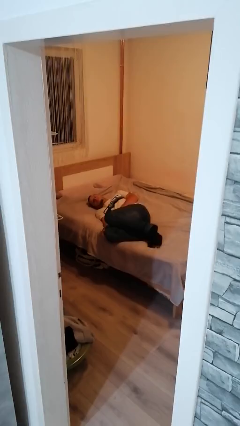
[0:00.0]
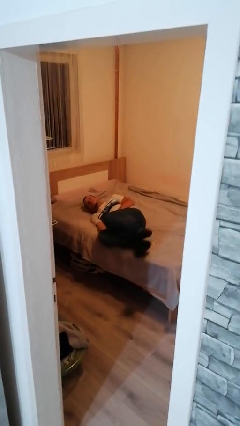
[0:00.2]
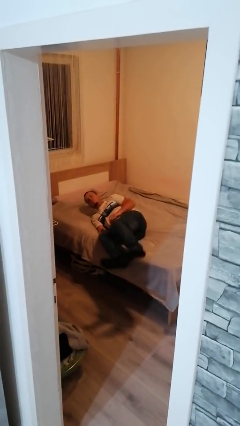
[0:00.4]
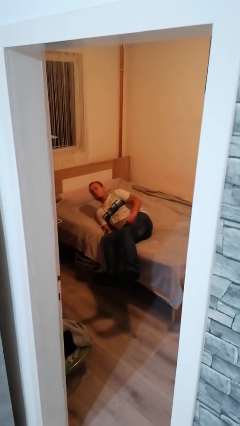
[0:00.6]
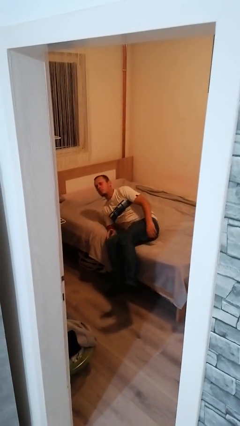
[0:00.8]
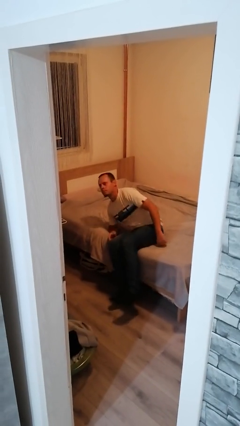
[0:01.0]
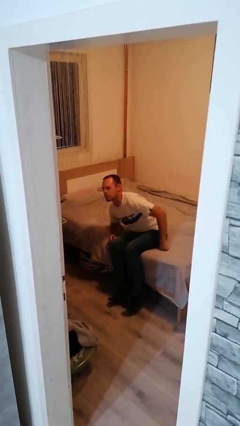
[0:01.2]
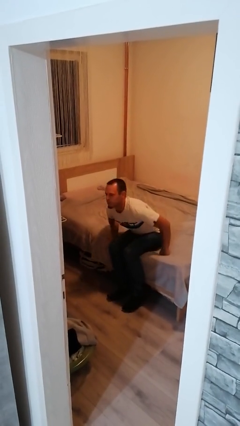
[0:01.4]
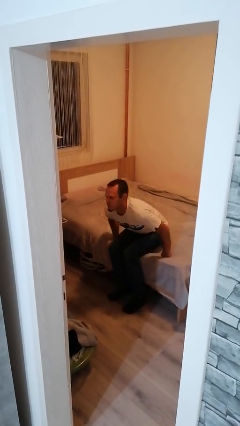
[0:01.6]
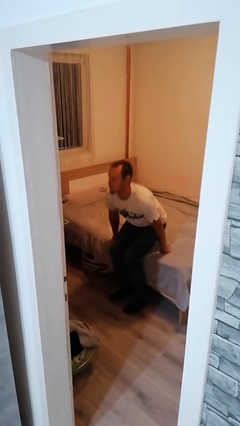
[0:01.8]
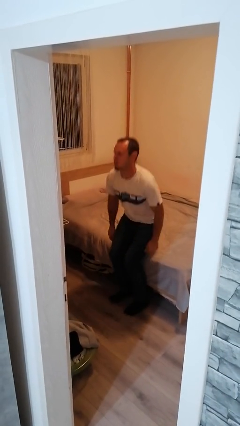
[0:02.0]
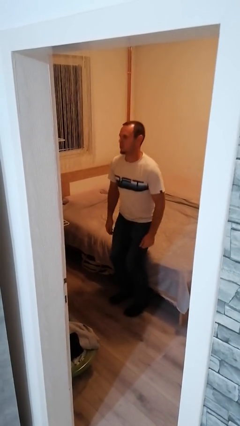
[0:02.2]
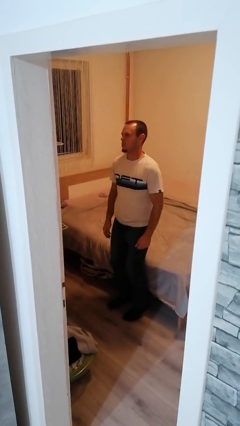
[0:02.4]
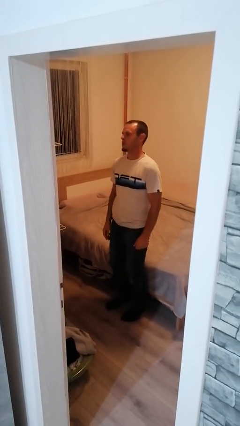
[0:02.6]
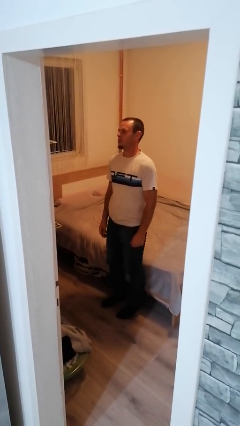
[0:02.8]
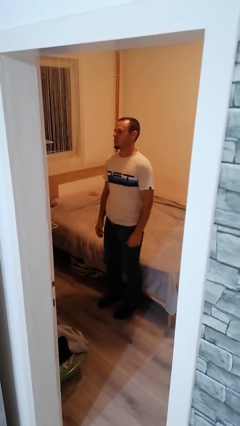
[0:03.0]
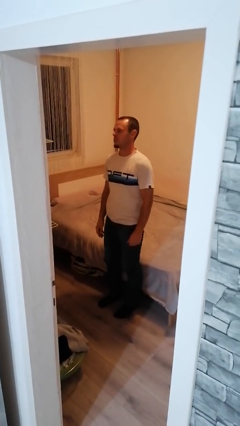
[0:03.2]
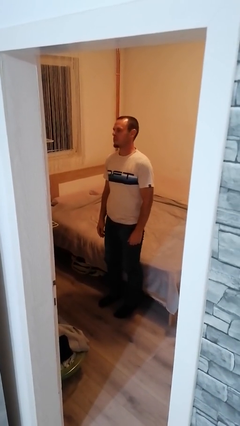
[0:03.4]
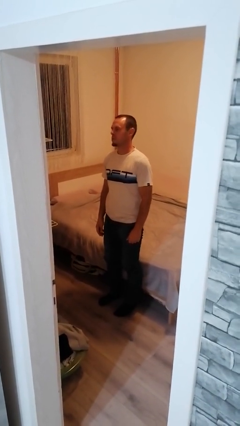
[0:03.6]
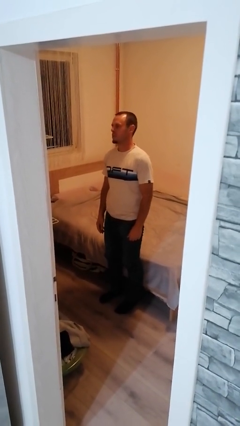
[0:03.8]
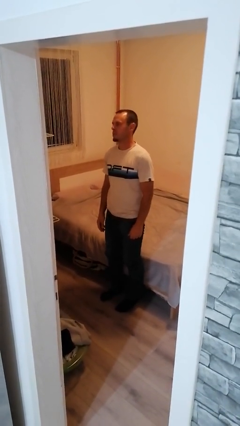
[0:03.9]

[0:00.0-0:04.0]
person stands up

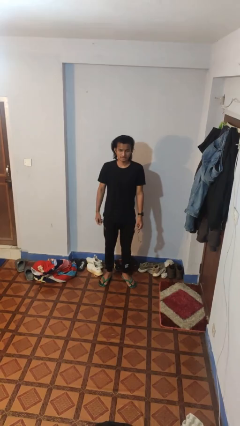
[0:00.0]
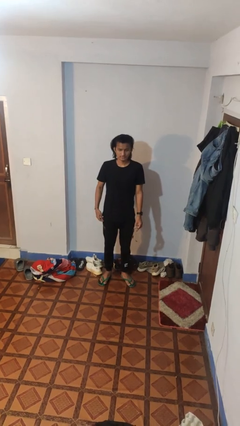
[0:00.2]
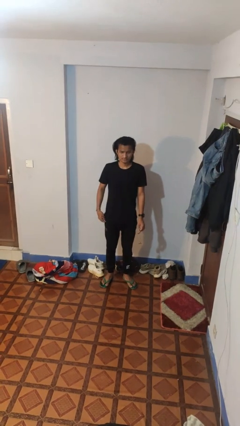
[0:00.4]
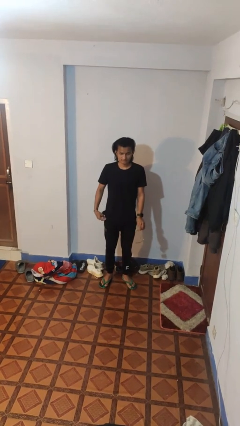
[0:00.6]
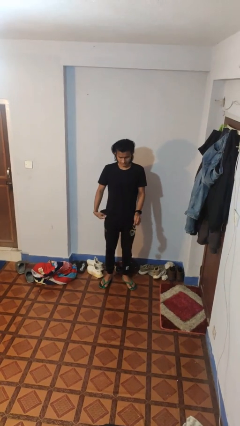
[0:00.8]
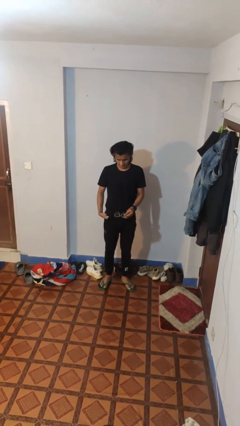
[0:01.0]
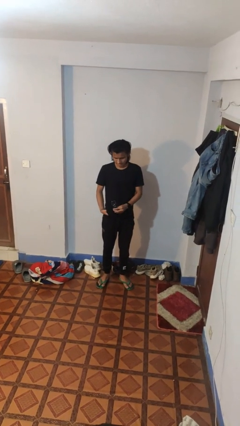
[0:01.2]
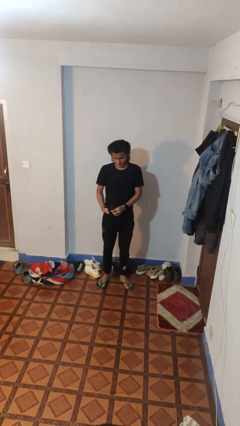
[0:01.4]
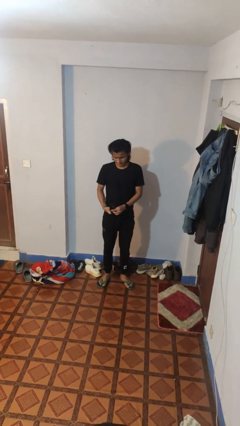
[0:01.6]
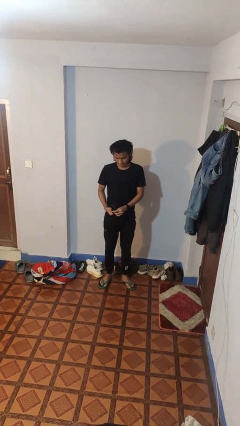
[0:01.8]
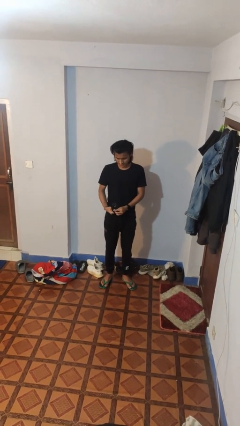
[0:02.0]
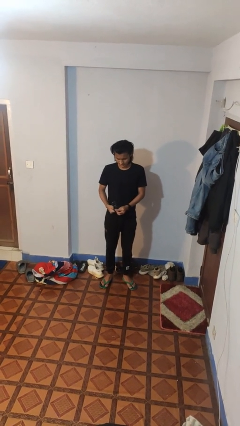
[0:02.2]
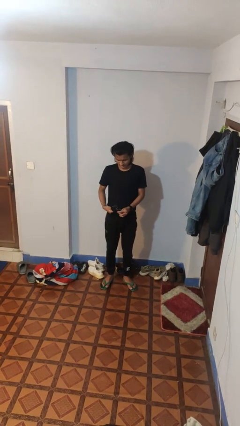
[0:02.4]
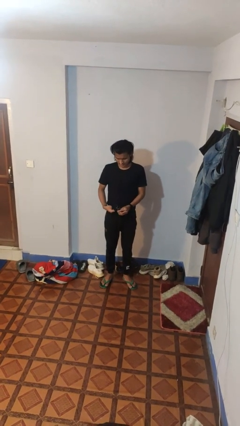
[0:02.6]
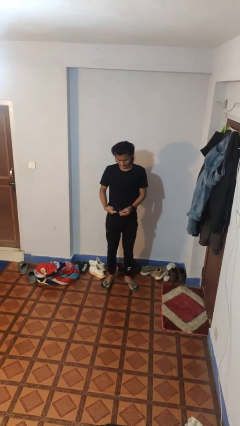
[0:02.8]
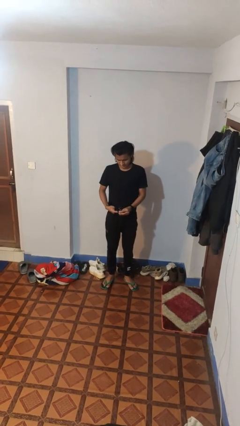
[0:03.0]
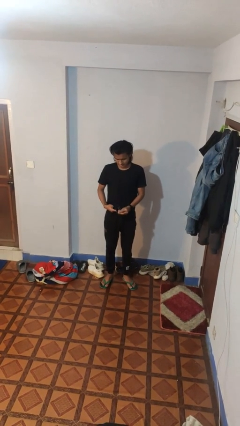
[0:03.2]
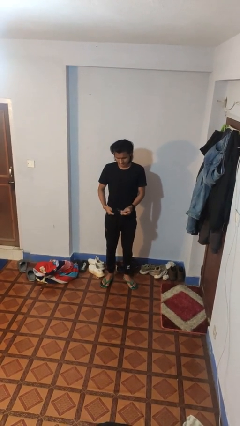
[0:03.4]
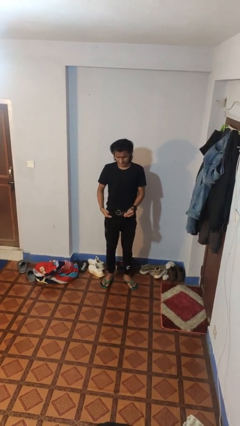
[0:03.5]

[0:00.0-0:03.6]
person cleans eyeglasses

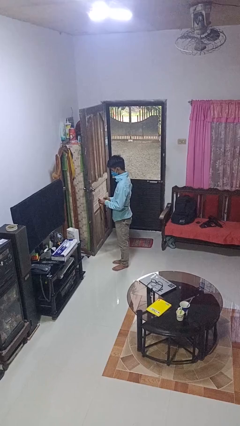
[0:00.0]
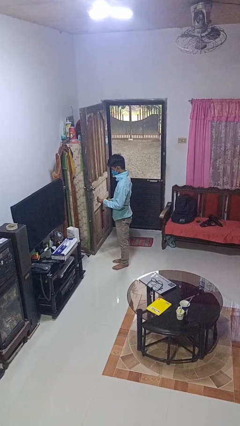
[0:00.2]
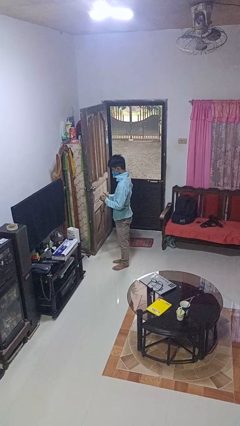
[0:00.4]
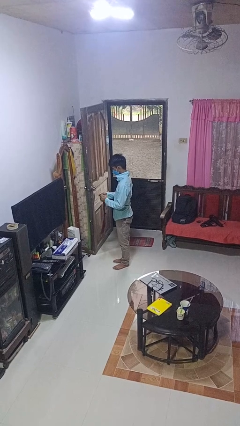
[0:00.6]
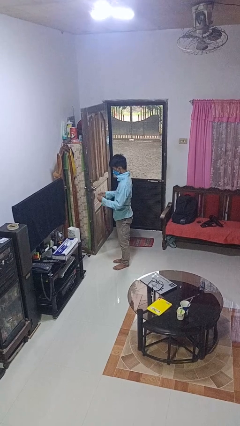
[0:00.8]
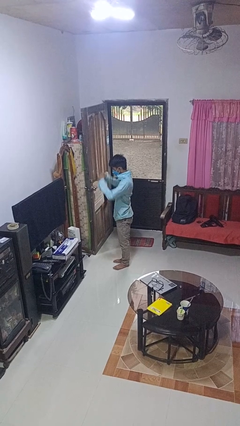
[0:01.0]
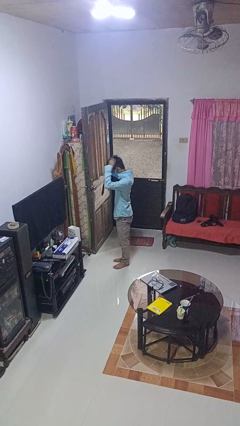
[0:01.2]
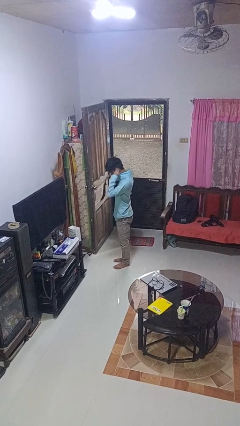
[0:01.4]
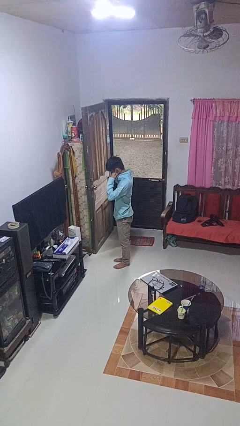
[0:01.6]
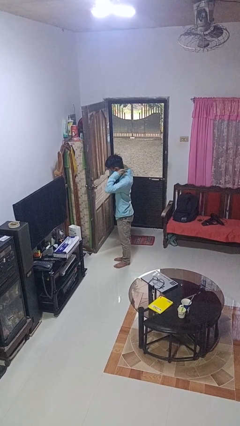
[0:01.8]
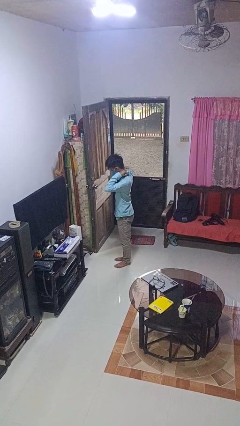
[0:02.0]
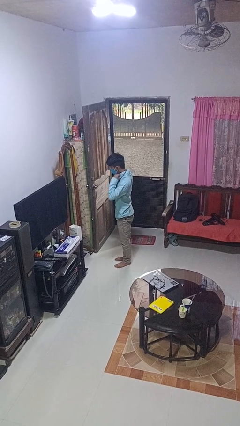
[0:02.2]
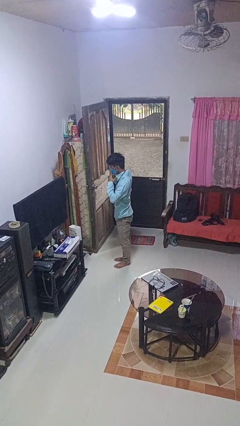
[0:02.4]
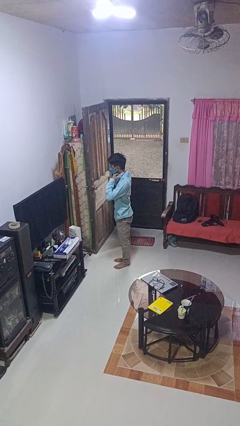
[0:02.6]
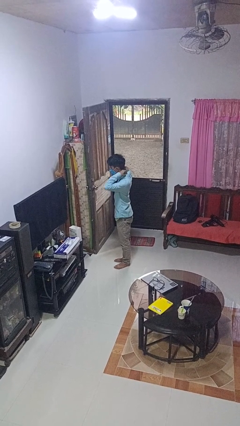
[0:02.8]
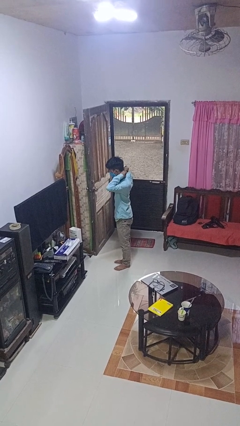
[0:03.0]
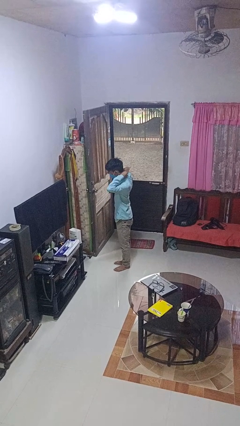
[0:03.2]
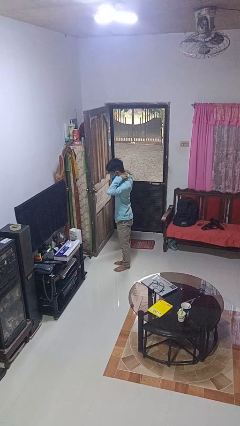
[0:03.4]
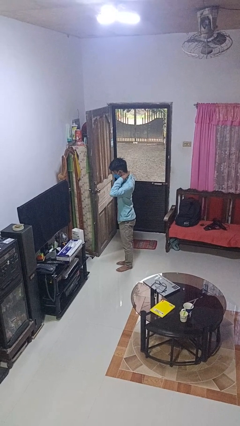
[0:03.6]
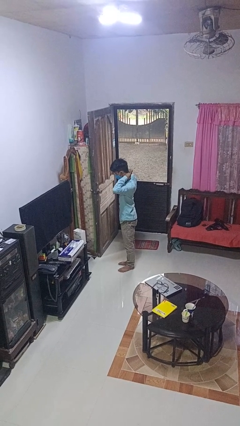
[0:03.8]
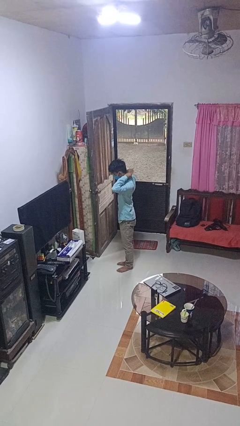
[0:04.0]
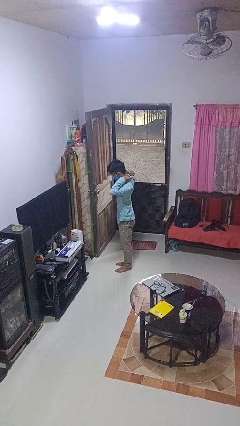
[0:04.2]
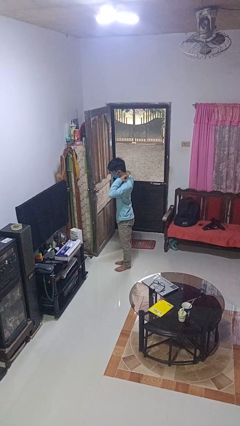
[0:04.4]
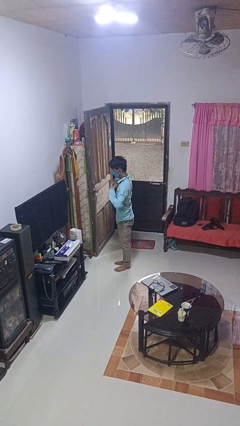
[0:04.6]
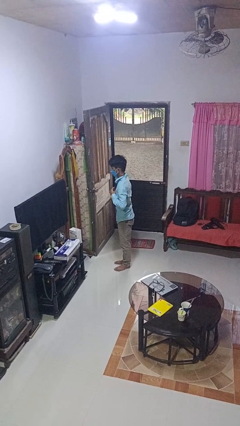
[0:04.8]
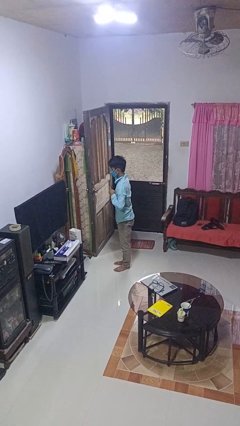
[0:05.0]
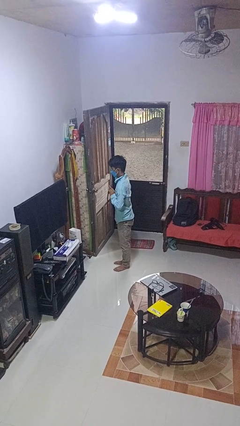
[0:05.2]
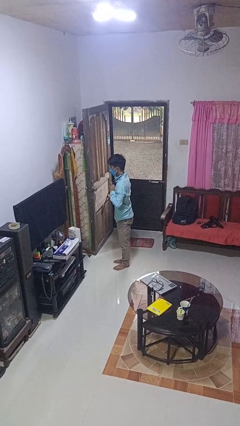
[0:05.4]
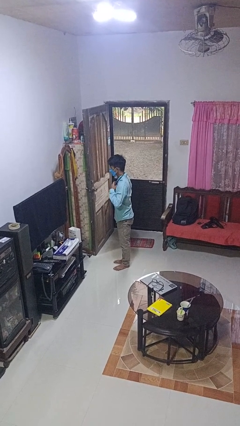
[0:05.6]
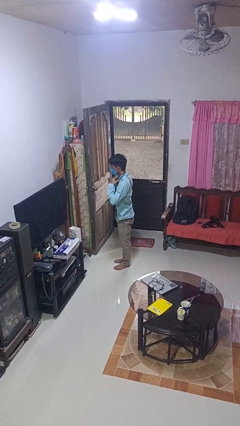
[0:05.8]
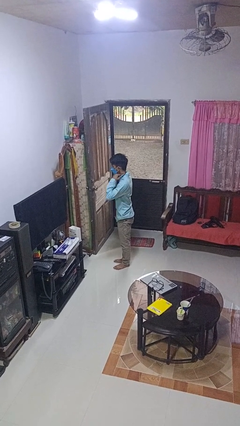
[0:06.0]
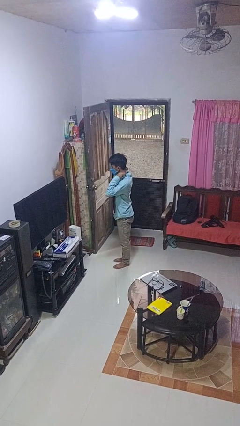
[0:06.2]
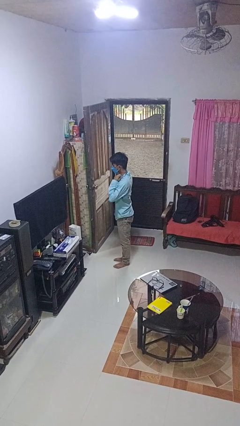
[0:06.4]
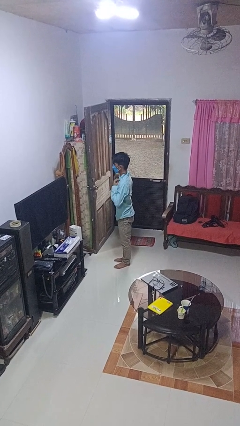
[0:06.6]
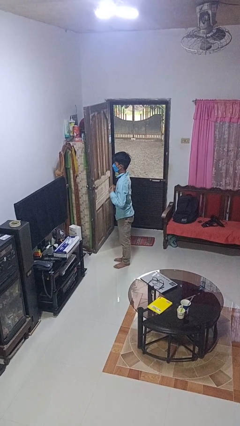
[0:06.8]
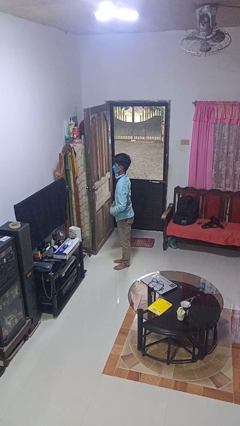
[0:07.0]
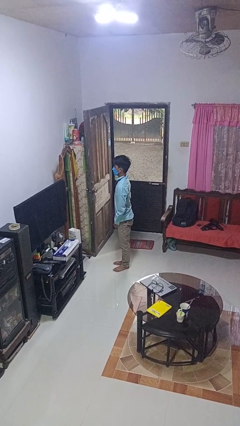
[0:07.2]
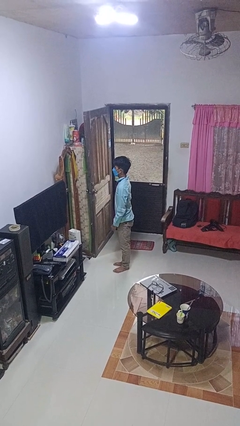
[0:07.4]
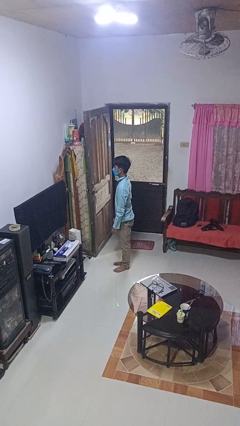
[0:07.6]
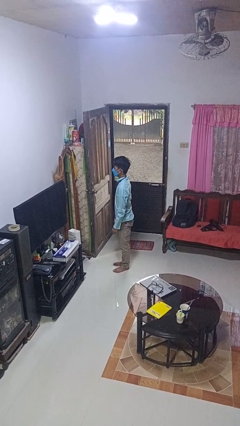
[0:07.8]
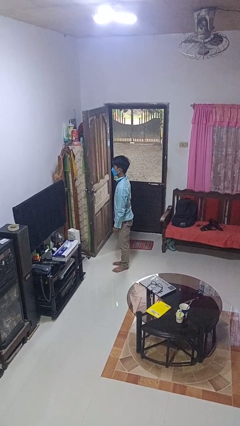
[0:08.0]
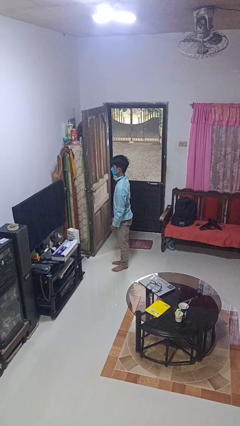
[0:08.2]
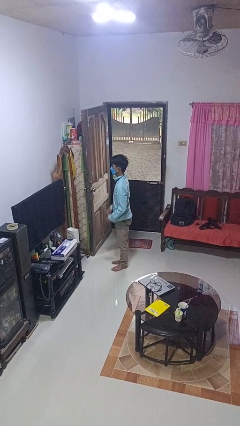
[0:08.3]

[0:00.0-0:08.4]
person puts on necktie

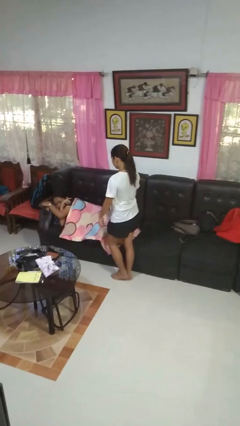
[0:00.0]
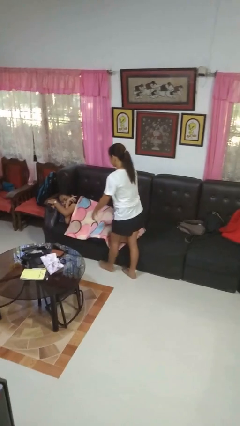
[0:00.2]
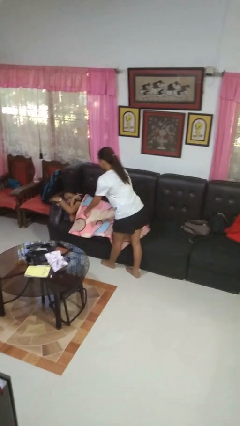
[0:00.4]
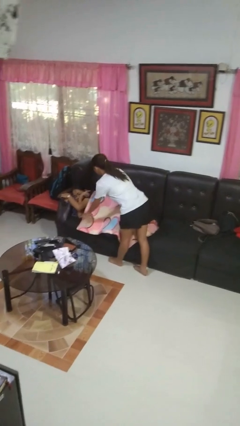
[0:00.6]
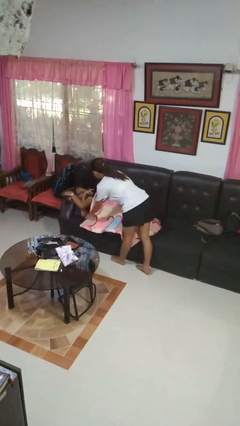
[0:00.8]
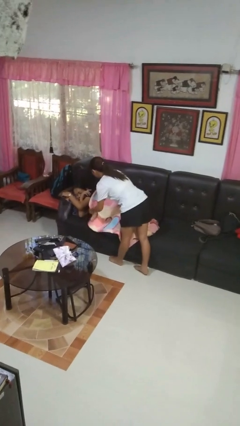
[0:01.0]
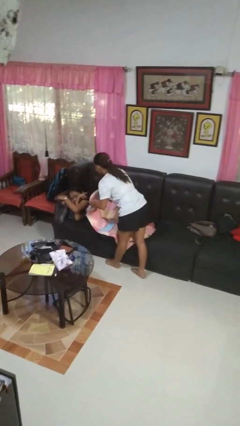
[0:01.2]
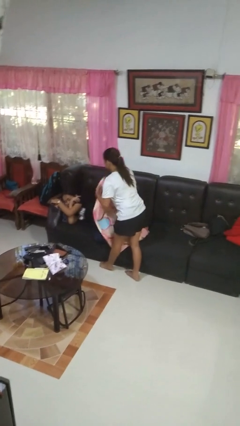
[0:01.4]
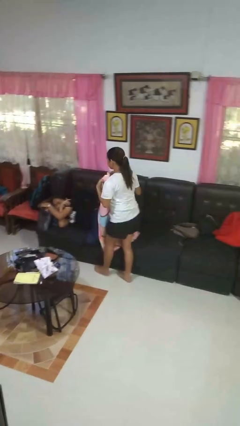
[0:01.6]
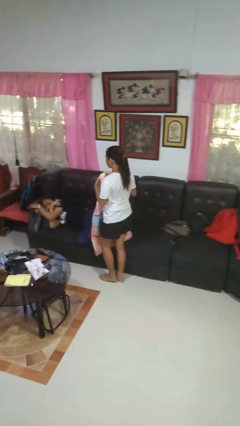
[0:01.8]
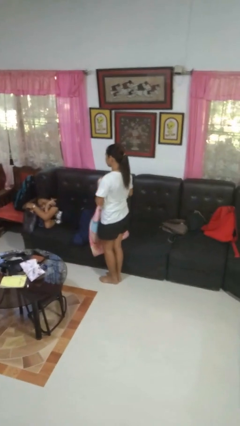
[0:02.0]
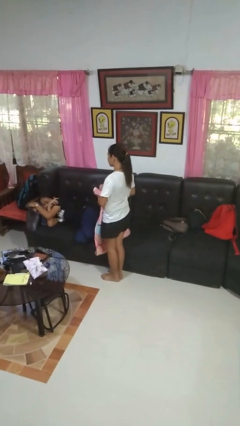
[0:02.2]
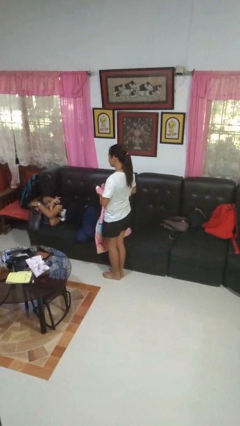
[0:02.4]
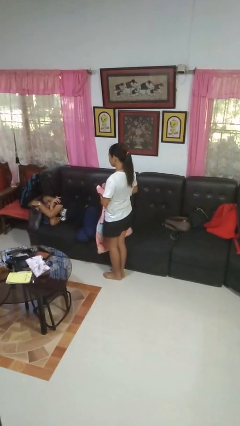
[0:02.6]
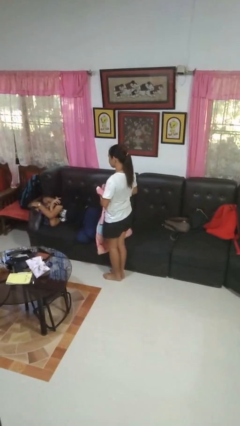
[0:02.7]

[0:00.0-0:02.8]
person uncovers friend with blanket
